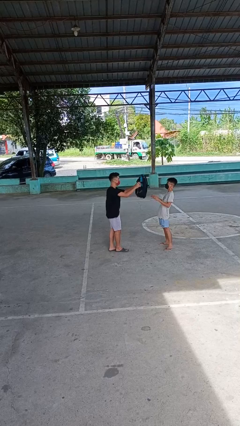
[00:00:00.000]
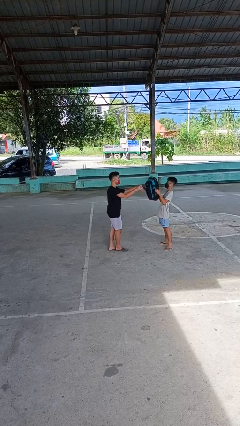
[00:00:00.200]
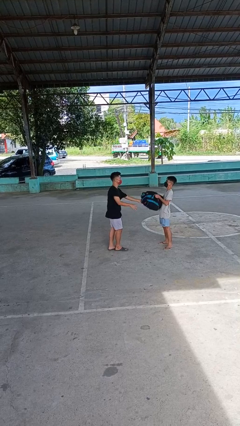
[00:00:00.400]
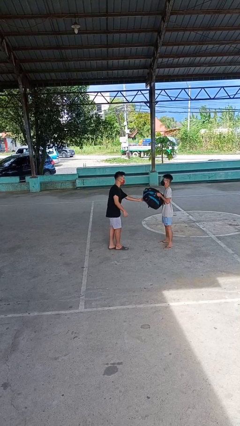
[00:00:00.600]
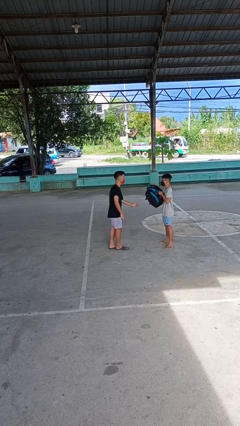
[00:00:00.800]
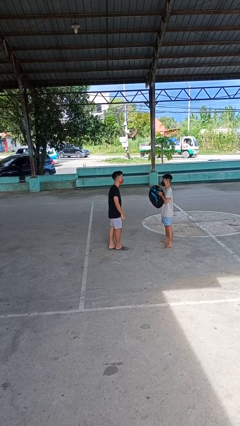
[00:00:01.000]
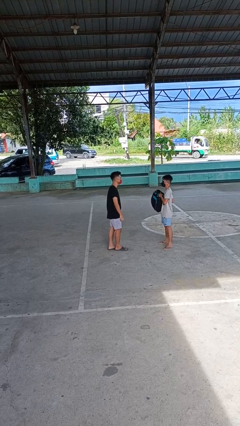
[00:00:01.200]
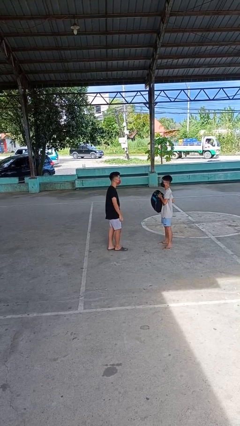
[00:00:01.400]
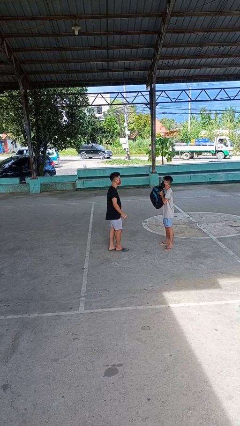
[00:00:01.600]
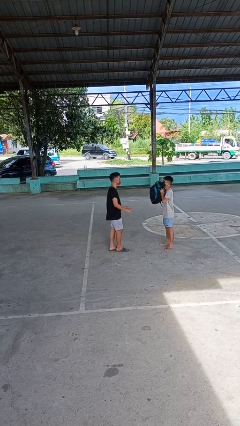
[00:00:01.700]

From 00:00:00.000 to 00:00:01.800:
person throws object to person

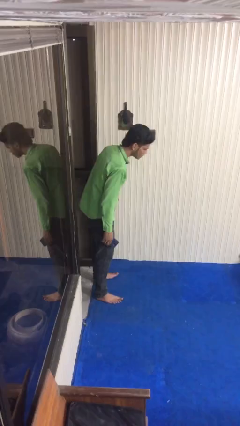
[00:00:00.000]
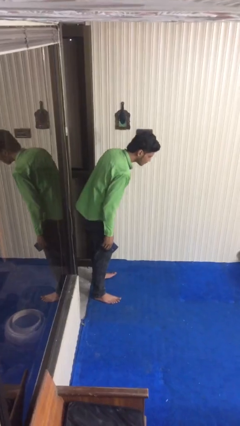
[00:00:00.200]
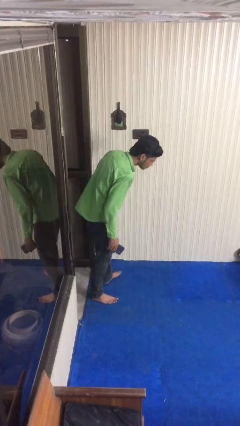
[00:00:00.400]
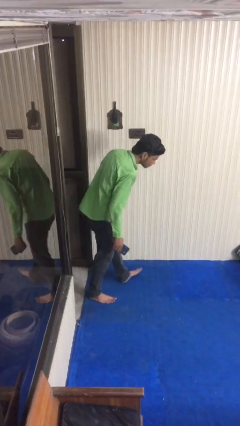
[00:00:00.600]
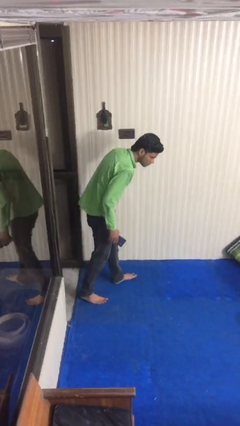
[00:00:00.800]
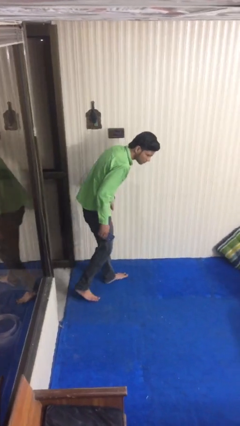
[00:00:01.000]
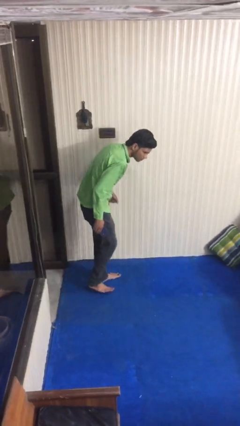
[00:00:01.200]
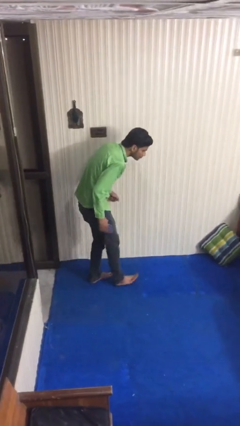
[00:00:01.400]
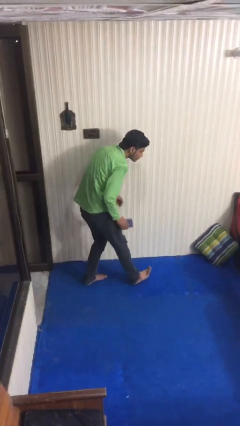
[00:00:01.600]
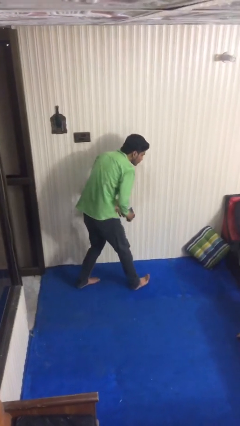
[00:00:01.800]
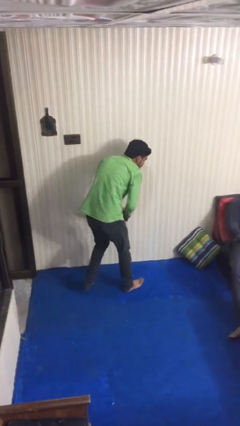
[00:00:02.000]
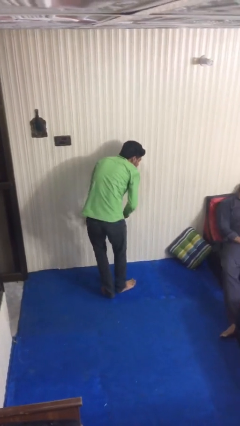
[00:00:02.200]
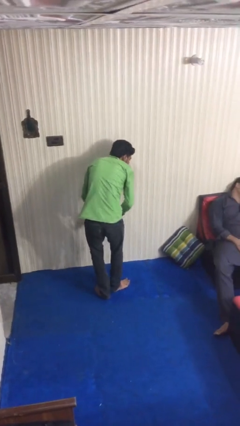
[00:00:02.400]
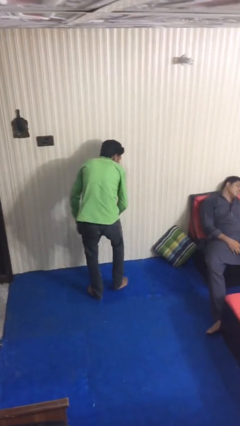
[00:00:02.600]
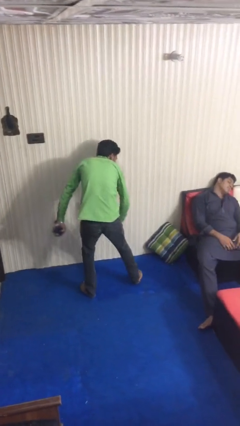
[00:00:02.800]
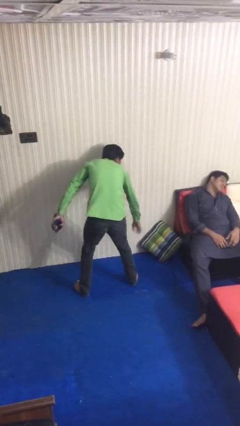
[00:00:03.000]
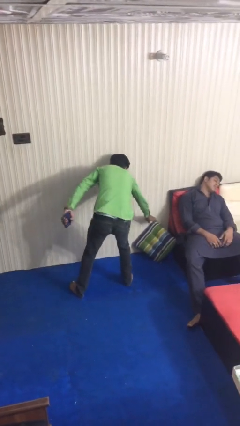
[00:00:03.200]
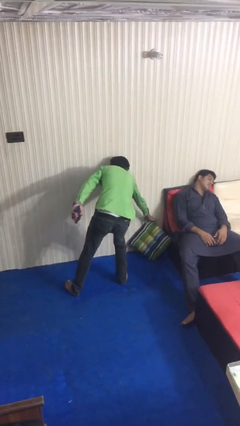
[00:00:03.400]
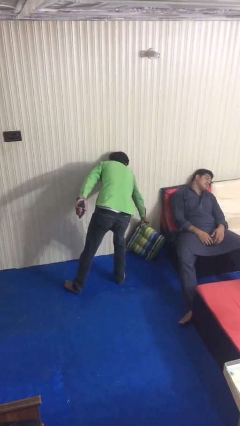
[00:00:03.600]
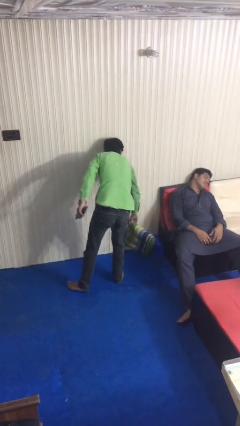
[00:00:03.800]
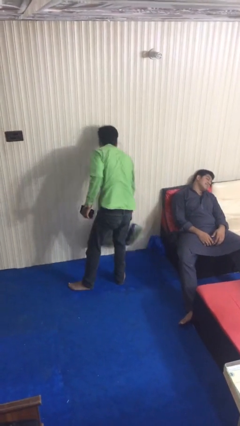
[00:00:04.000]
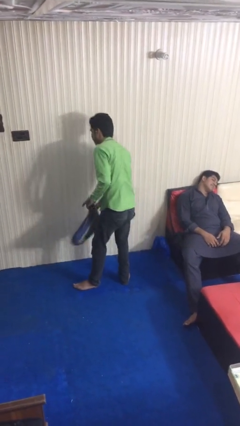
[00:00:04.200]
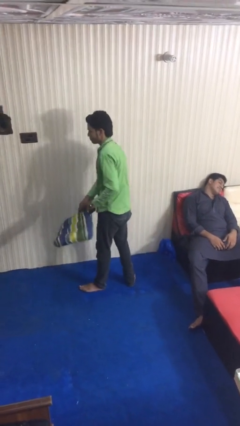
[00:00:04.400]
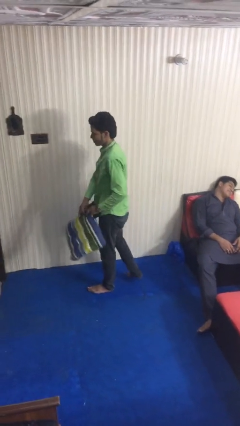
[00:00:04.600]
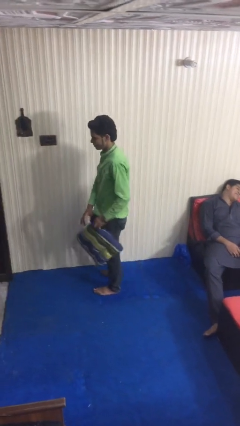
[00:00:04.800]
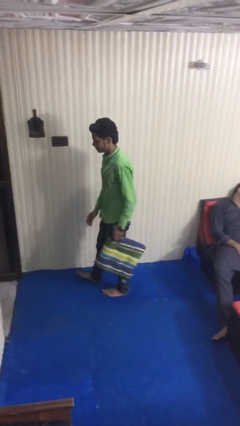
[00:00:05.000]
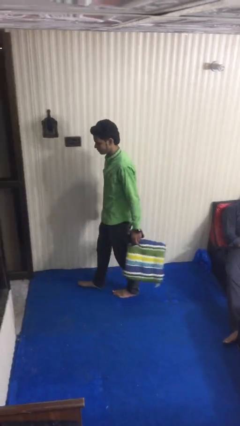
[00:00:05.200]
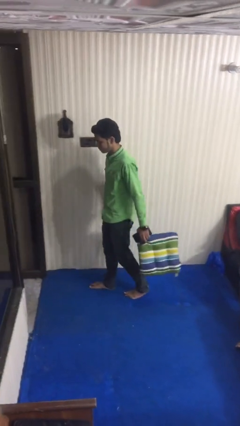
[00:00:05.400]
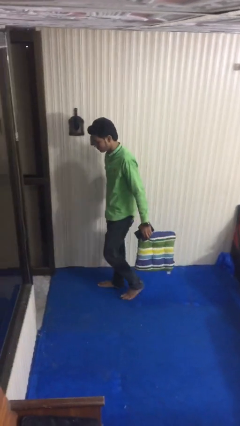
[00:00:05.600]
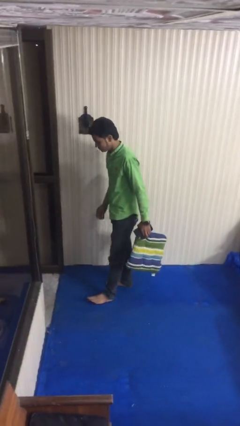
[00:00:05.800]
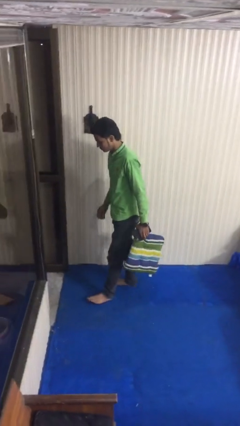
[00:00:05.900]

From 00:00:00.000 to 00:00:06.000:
person steals object from person

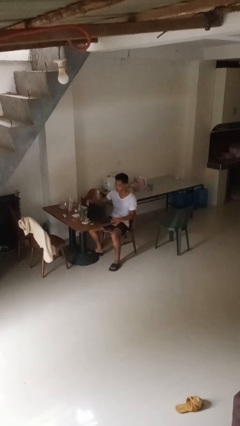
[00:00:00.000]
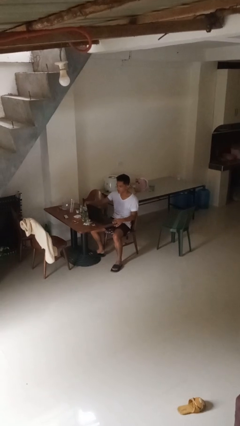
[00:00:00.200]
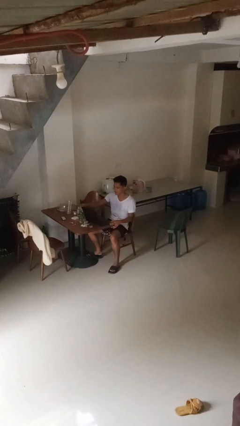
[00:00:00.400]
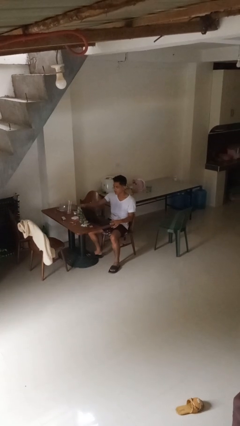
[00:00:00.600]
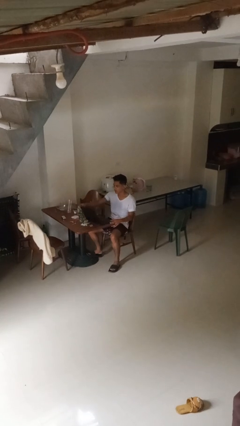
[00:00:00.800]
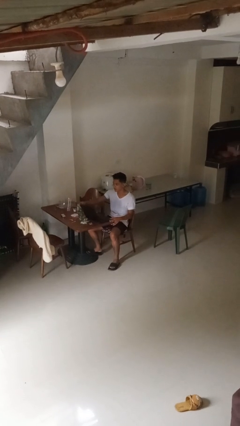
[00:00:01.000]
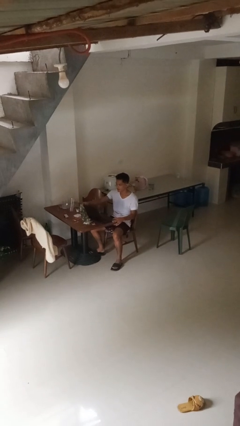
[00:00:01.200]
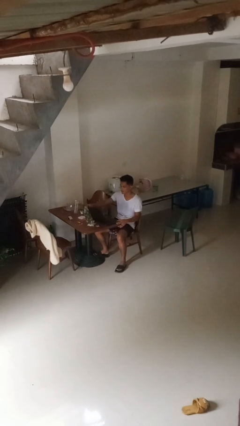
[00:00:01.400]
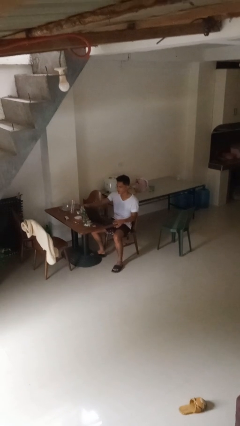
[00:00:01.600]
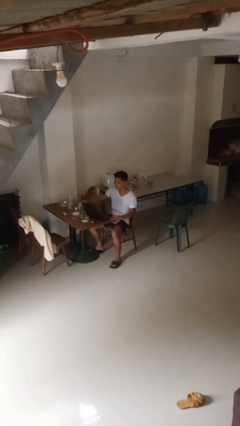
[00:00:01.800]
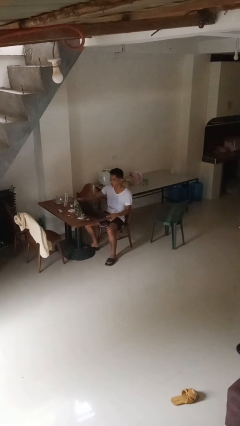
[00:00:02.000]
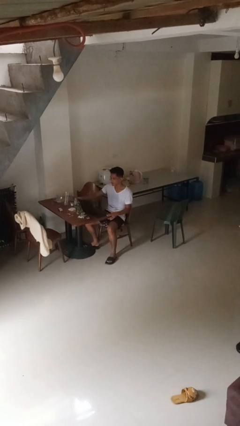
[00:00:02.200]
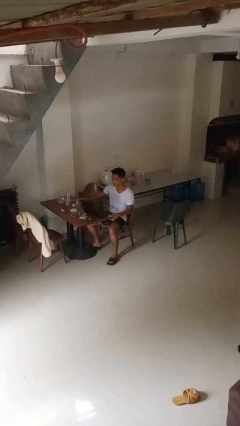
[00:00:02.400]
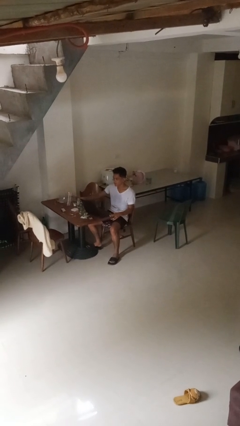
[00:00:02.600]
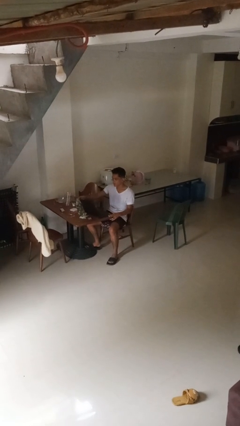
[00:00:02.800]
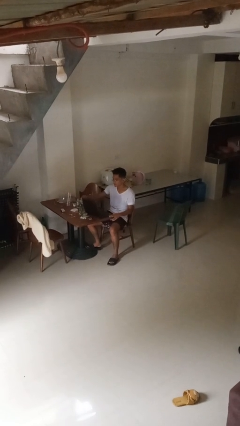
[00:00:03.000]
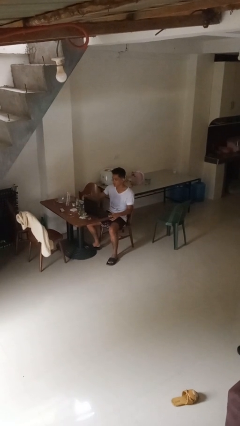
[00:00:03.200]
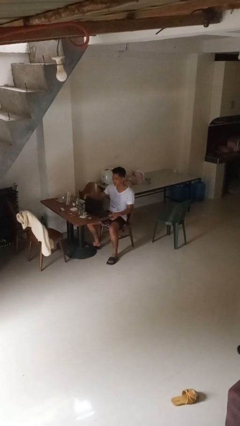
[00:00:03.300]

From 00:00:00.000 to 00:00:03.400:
person opens laptop

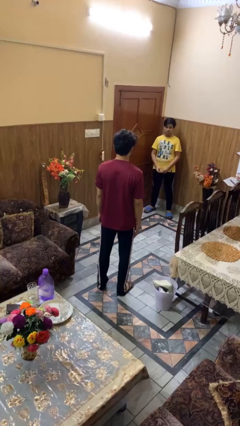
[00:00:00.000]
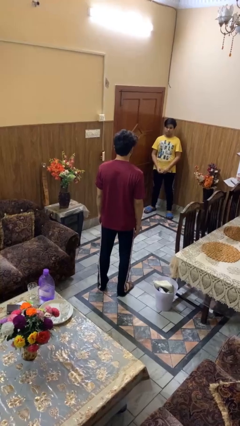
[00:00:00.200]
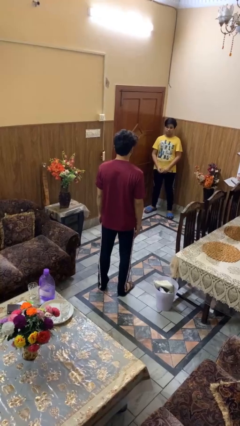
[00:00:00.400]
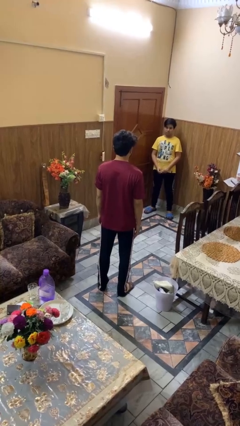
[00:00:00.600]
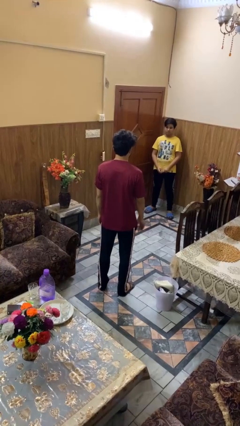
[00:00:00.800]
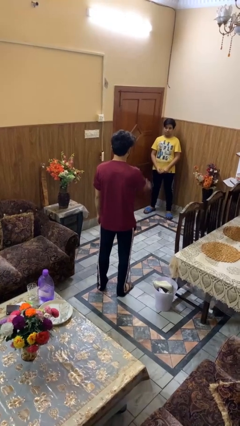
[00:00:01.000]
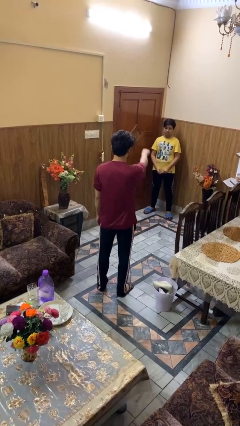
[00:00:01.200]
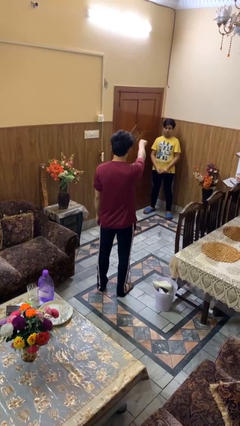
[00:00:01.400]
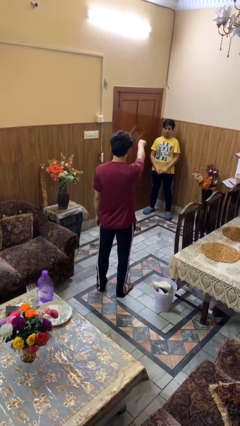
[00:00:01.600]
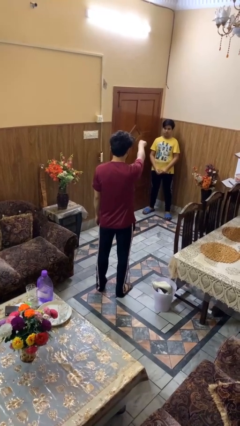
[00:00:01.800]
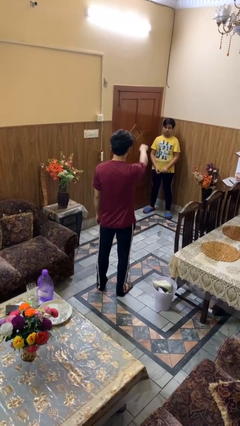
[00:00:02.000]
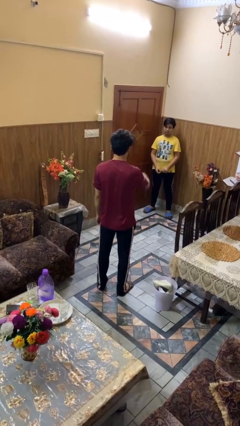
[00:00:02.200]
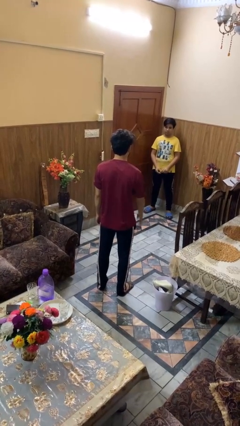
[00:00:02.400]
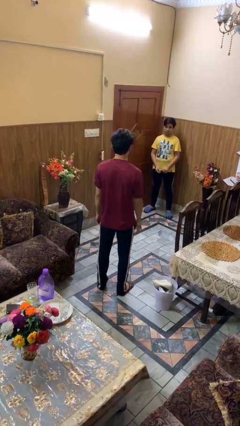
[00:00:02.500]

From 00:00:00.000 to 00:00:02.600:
person points at person

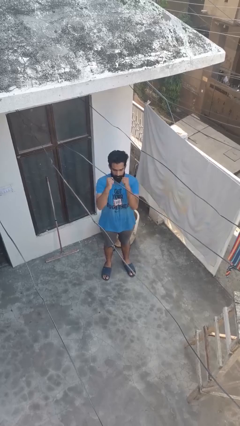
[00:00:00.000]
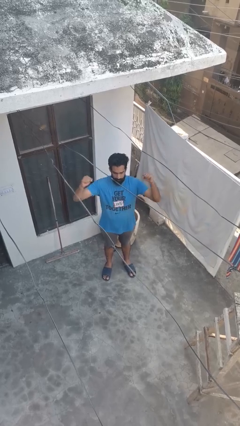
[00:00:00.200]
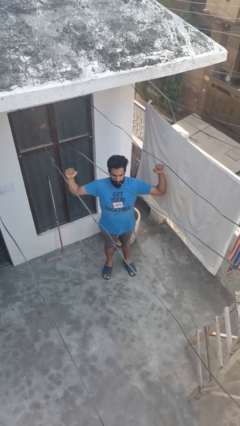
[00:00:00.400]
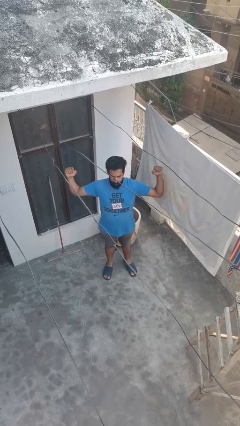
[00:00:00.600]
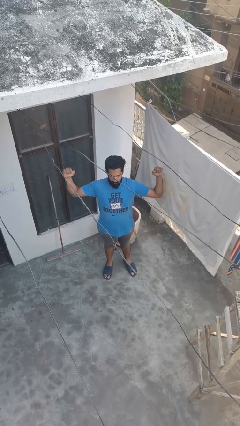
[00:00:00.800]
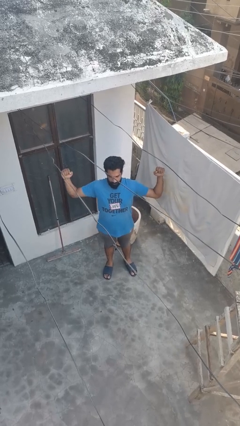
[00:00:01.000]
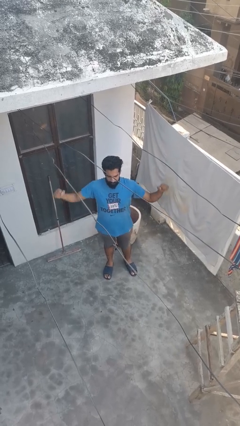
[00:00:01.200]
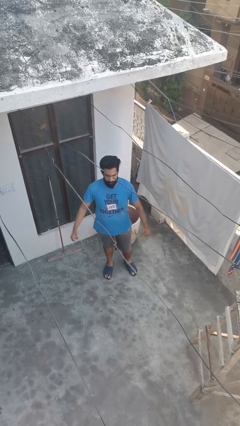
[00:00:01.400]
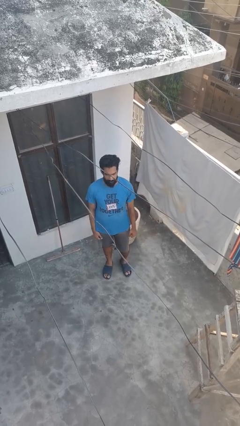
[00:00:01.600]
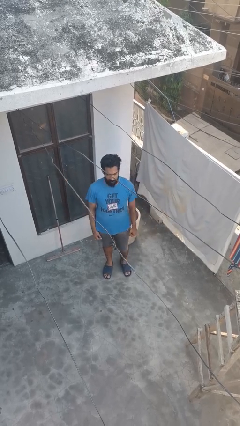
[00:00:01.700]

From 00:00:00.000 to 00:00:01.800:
person gestures zoom out

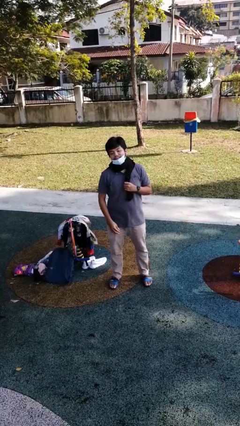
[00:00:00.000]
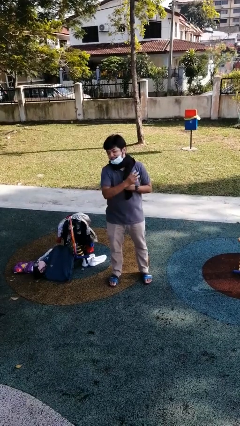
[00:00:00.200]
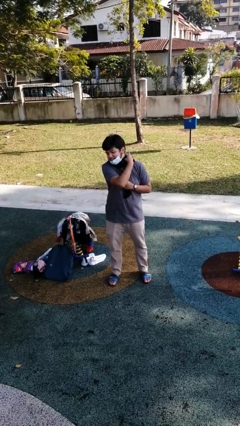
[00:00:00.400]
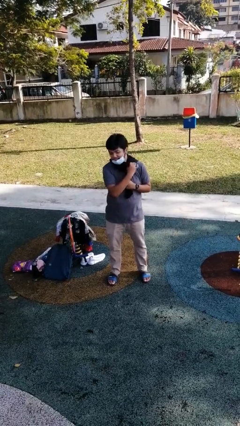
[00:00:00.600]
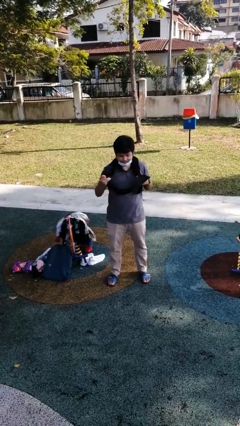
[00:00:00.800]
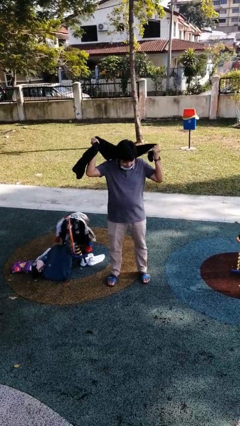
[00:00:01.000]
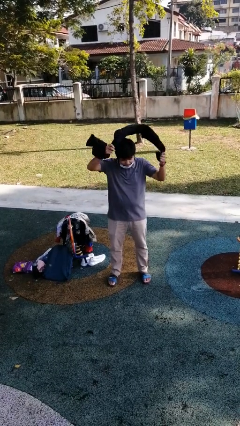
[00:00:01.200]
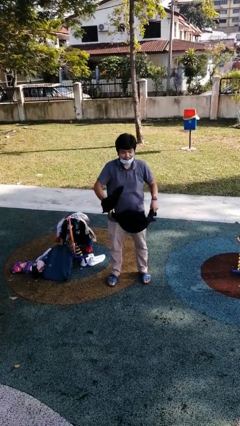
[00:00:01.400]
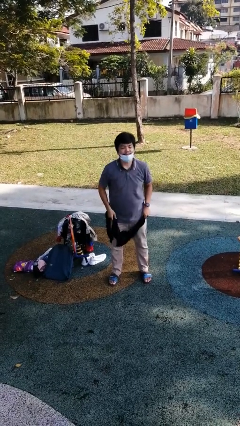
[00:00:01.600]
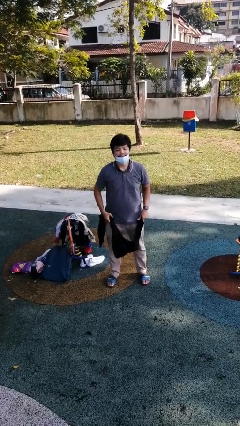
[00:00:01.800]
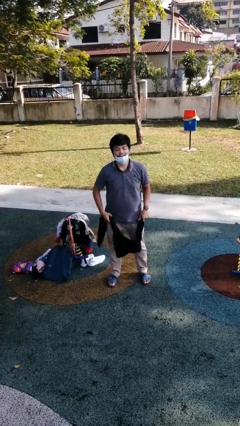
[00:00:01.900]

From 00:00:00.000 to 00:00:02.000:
person takes off scarf
